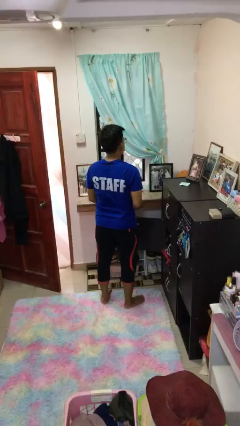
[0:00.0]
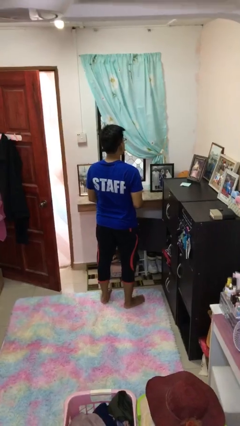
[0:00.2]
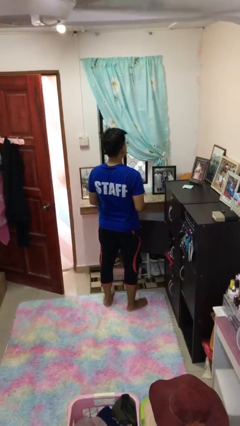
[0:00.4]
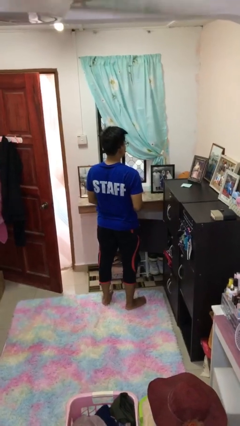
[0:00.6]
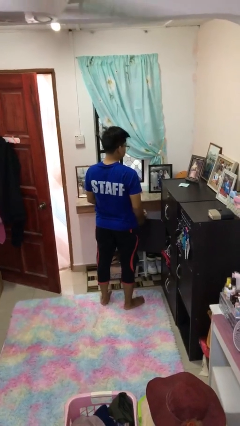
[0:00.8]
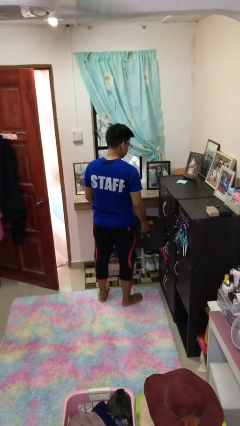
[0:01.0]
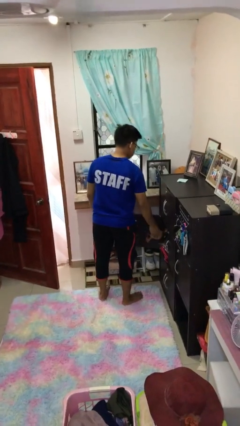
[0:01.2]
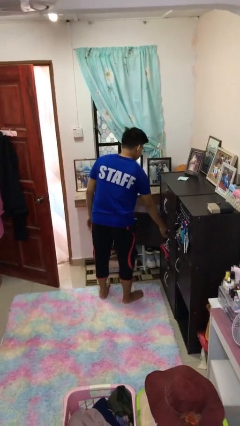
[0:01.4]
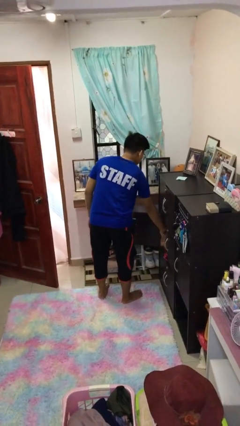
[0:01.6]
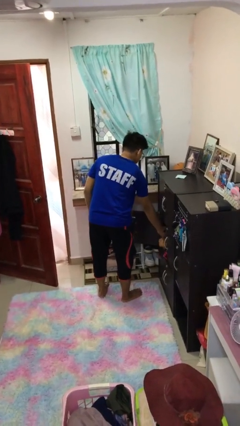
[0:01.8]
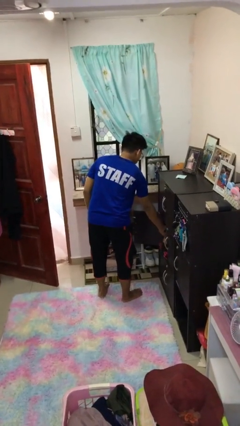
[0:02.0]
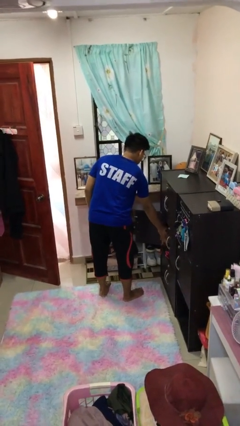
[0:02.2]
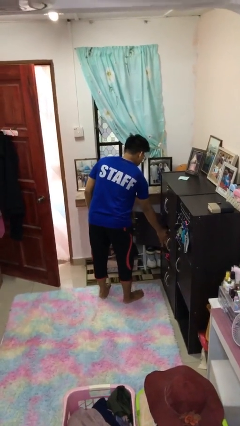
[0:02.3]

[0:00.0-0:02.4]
person puts down object into cabinet

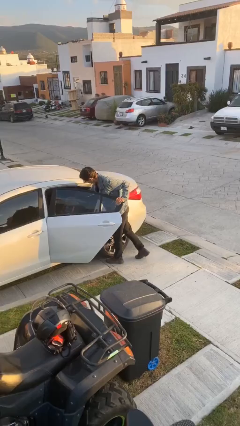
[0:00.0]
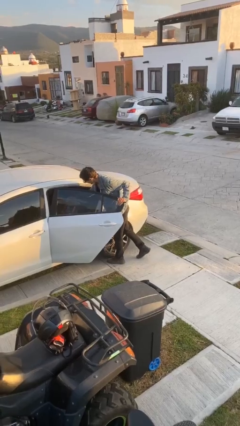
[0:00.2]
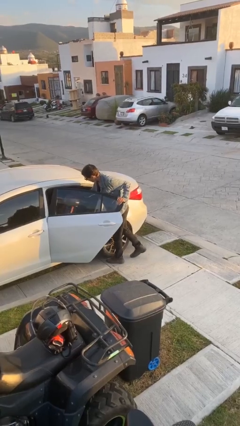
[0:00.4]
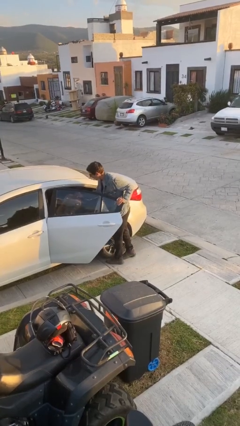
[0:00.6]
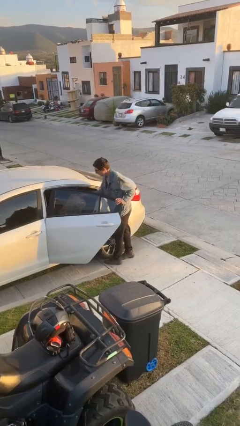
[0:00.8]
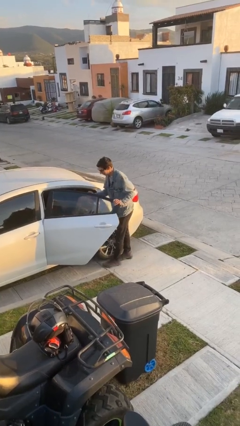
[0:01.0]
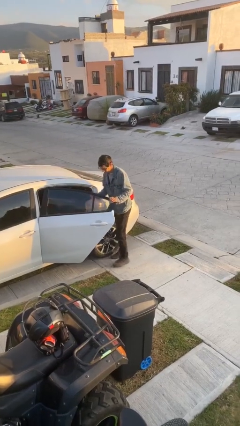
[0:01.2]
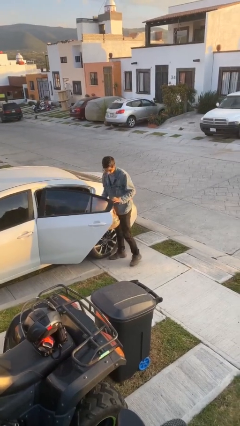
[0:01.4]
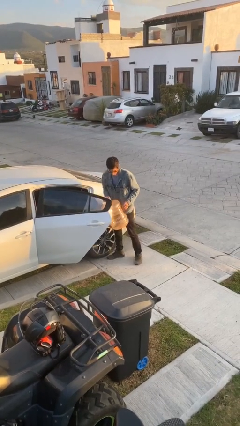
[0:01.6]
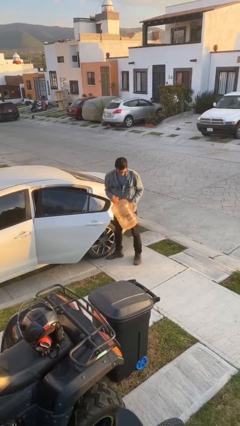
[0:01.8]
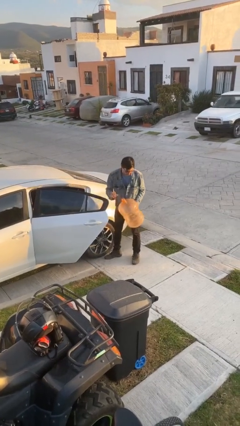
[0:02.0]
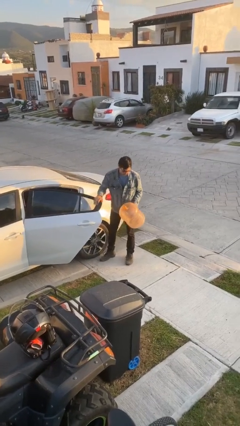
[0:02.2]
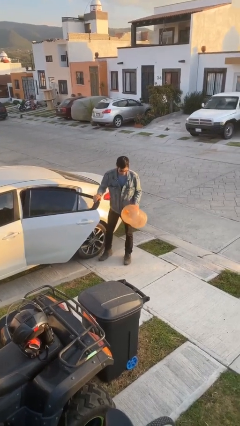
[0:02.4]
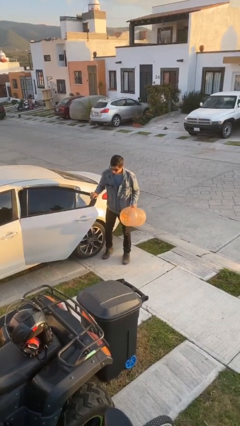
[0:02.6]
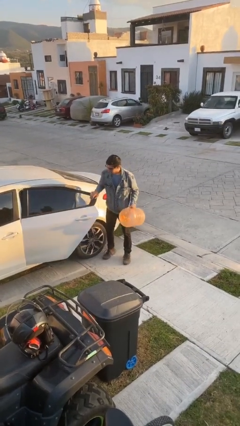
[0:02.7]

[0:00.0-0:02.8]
person unloads car

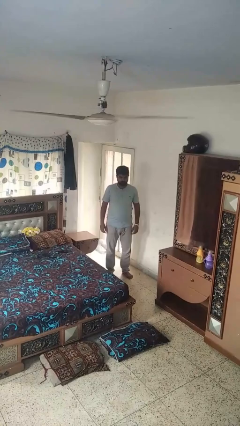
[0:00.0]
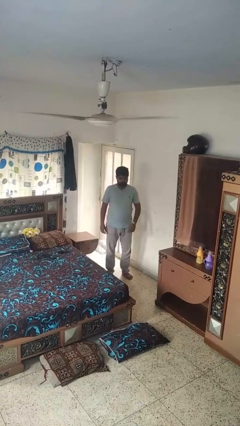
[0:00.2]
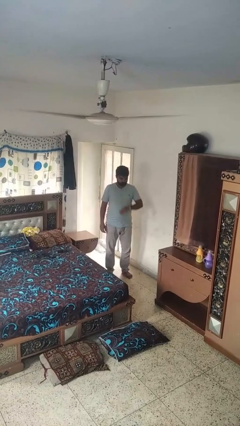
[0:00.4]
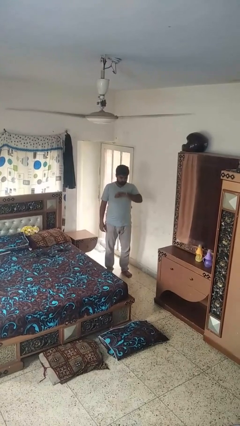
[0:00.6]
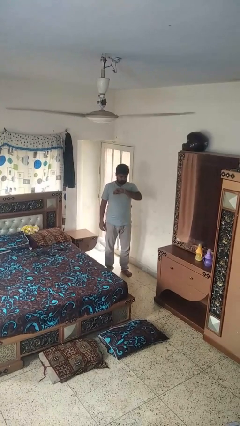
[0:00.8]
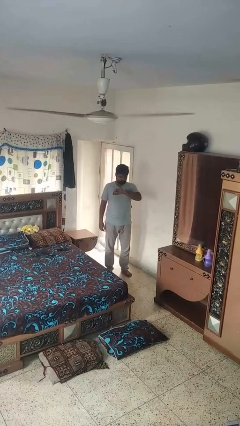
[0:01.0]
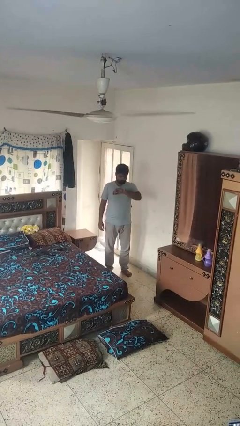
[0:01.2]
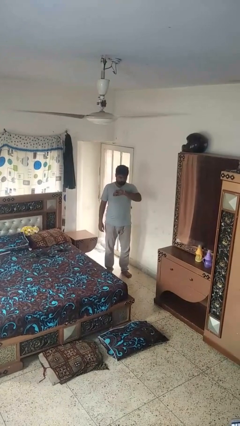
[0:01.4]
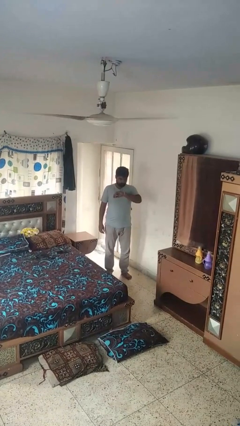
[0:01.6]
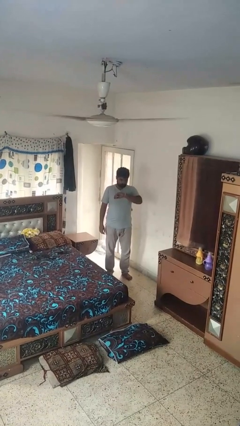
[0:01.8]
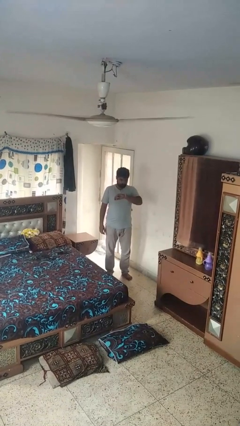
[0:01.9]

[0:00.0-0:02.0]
person looks at wristwatch

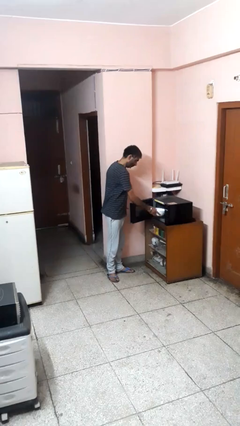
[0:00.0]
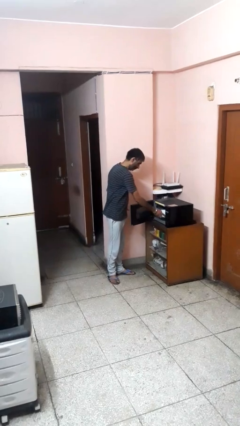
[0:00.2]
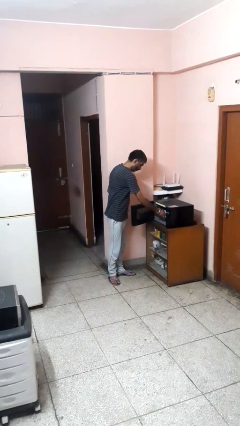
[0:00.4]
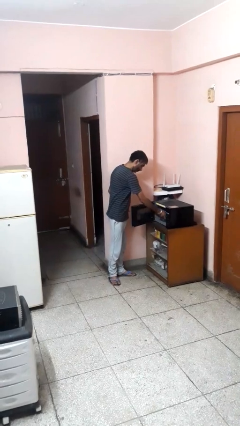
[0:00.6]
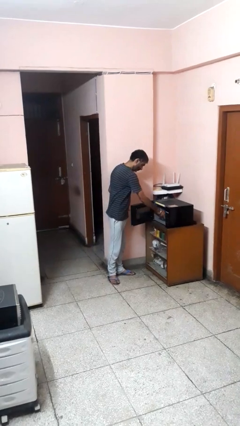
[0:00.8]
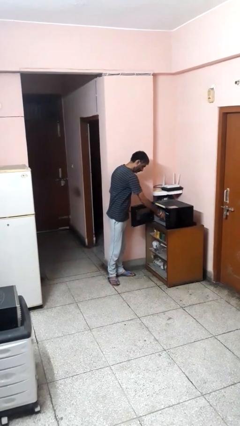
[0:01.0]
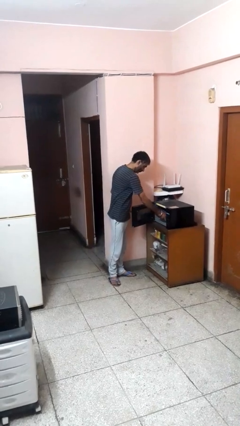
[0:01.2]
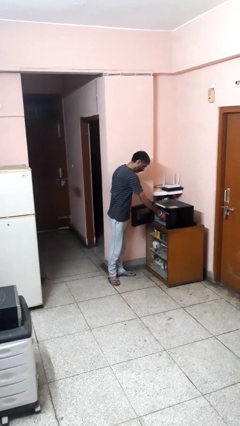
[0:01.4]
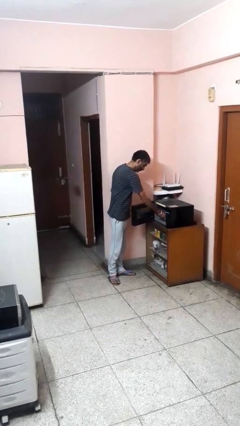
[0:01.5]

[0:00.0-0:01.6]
person puts object into microwave

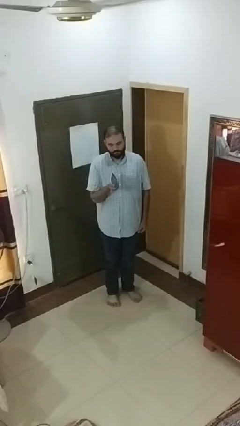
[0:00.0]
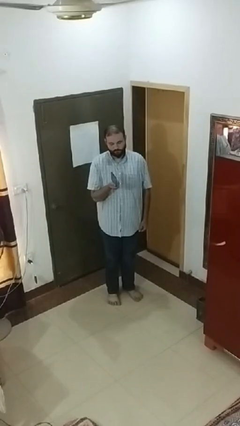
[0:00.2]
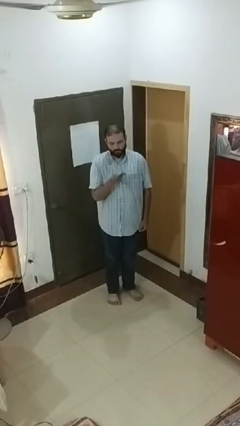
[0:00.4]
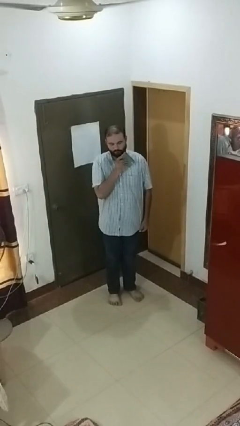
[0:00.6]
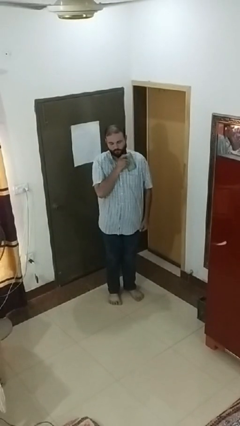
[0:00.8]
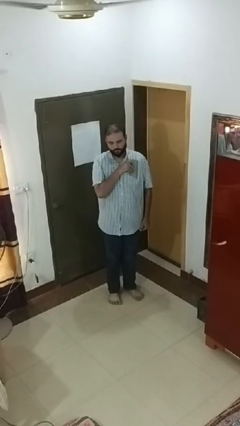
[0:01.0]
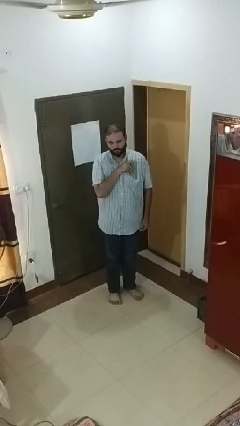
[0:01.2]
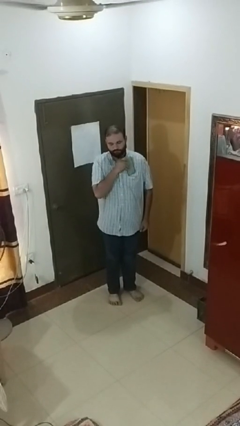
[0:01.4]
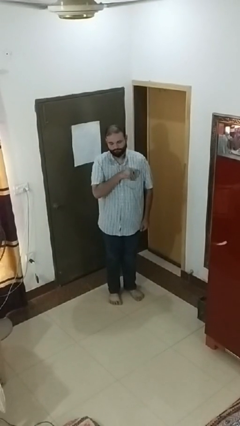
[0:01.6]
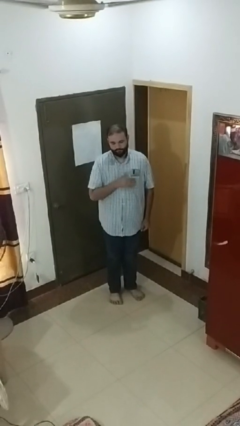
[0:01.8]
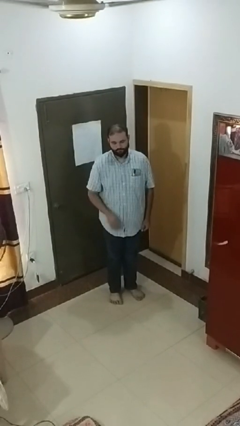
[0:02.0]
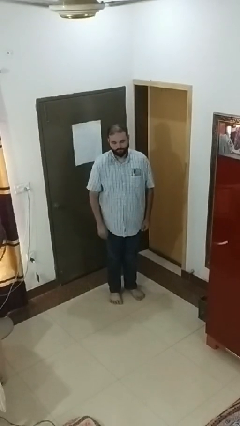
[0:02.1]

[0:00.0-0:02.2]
person puts phone into pocket

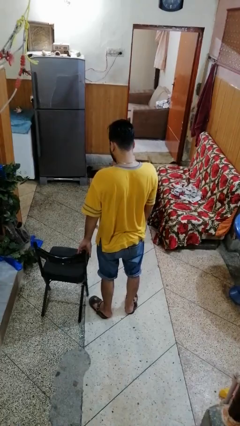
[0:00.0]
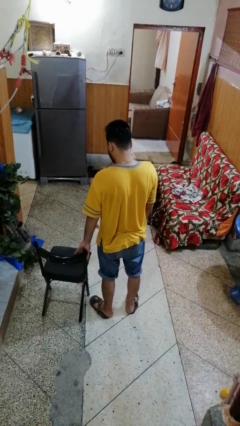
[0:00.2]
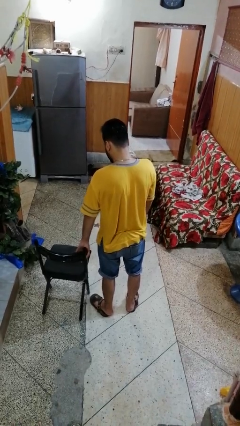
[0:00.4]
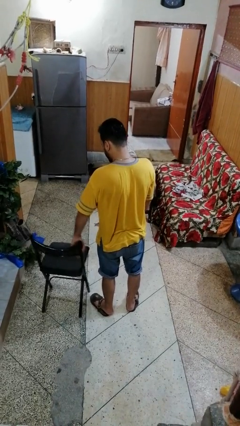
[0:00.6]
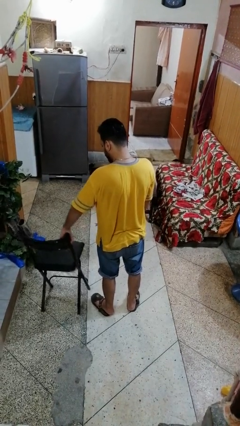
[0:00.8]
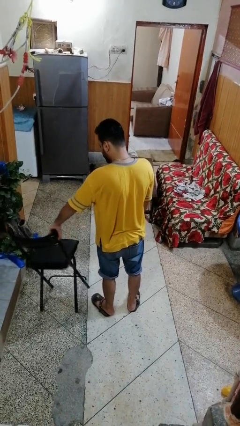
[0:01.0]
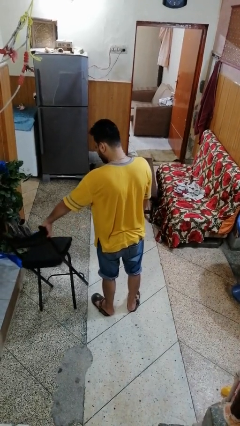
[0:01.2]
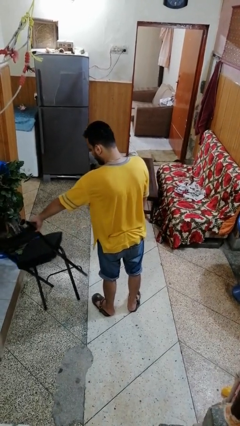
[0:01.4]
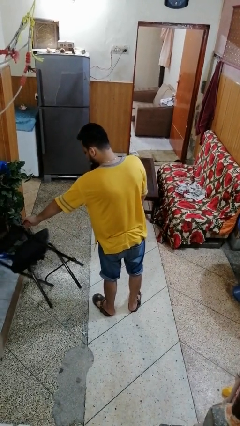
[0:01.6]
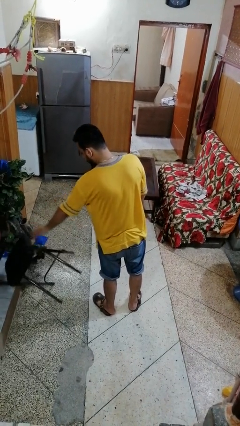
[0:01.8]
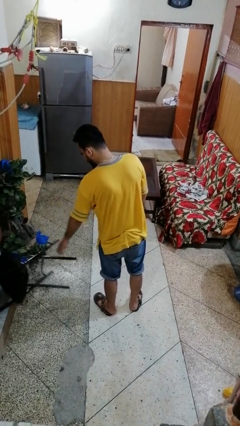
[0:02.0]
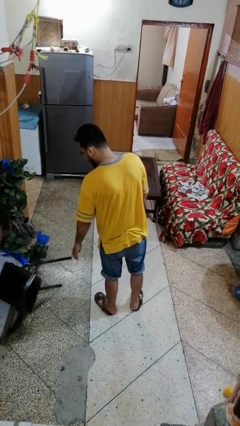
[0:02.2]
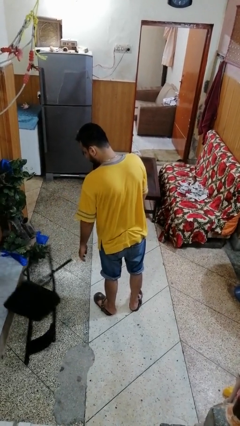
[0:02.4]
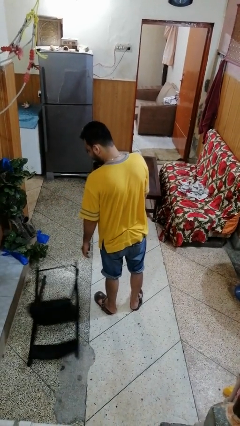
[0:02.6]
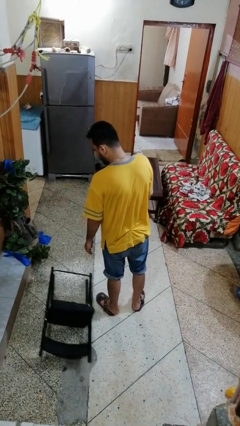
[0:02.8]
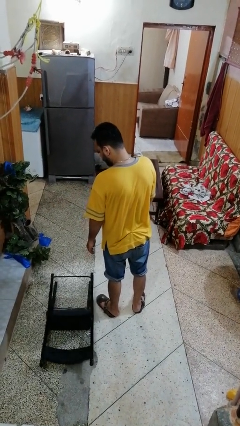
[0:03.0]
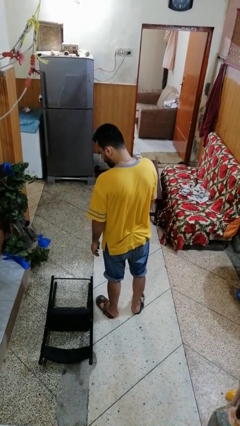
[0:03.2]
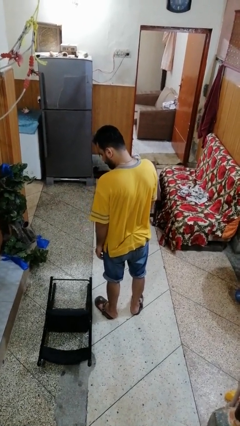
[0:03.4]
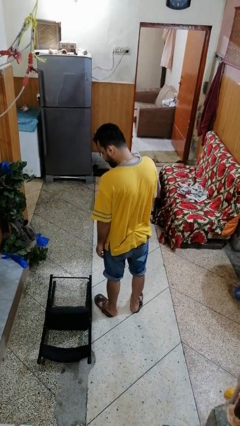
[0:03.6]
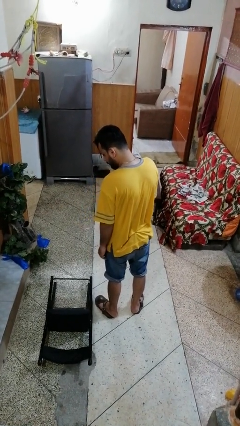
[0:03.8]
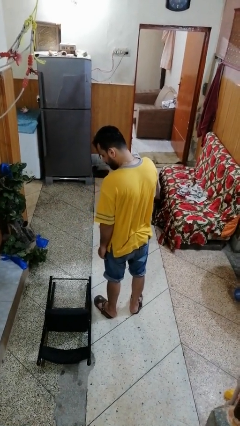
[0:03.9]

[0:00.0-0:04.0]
person knocks over furniture

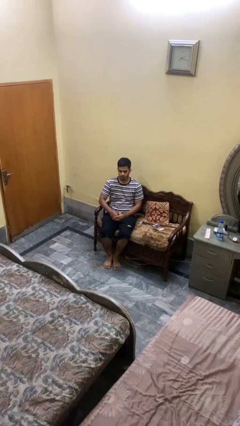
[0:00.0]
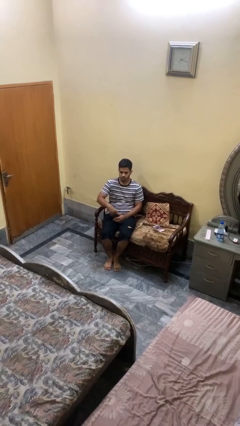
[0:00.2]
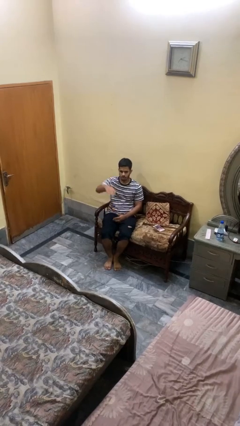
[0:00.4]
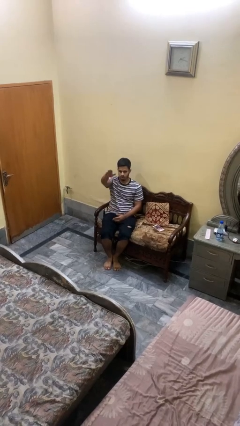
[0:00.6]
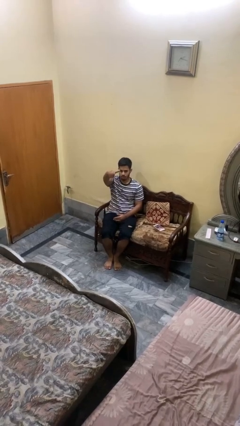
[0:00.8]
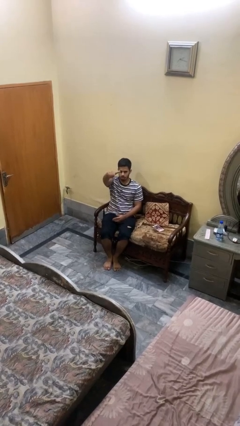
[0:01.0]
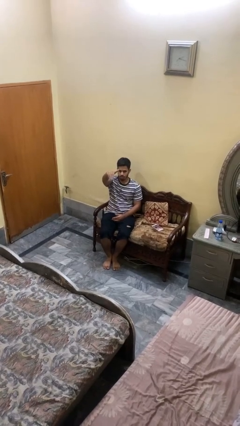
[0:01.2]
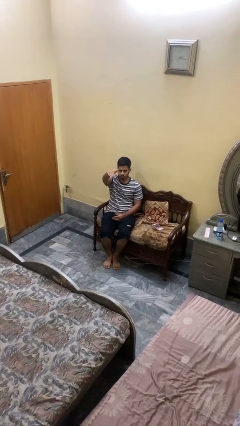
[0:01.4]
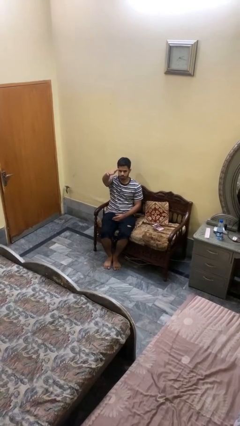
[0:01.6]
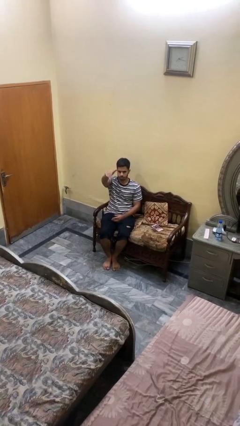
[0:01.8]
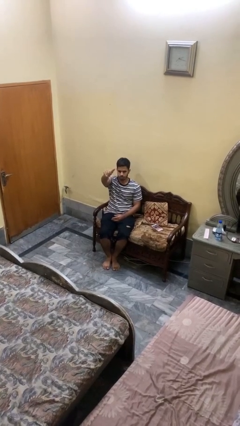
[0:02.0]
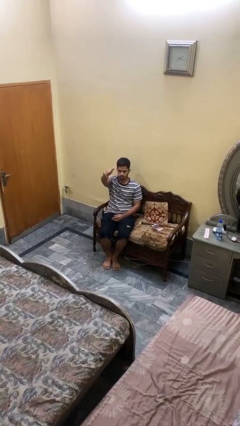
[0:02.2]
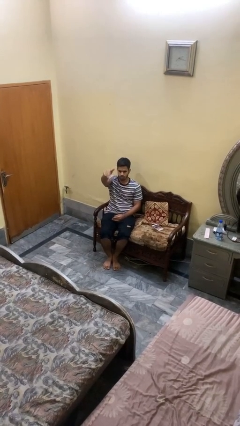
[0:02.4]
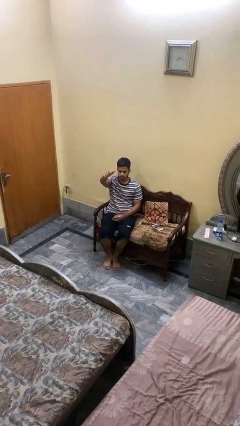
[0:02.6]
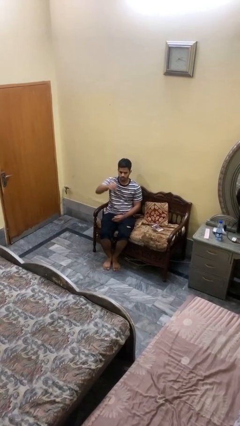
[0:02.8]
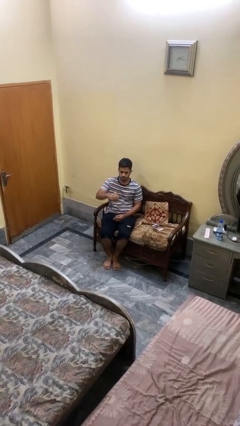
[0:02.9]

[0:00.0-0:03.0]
person gestures come here
